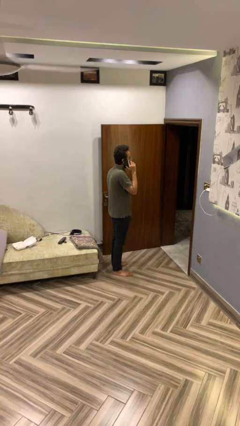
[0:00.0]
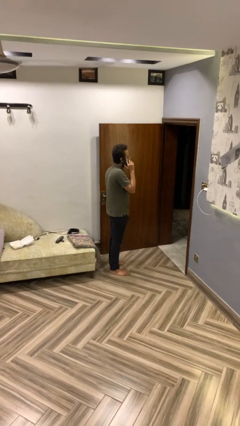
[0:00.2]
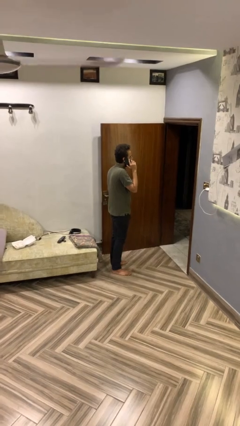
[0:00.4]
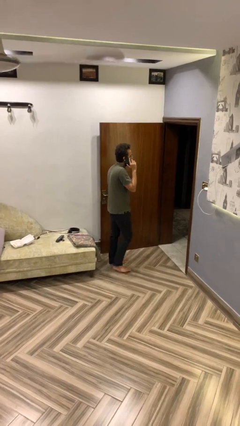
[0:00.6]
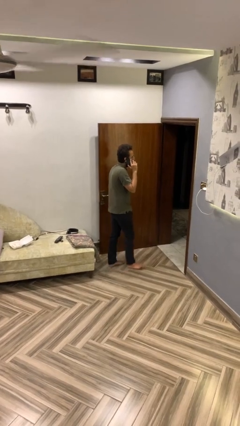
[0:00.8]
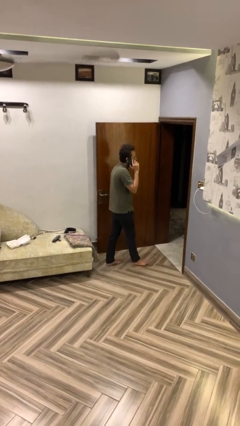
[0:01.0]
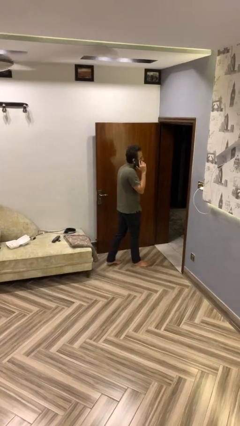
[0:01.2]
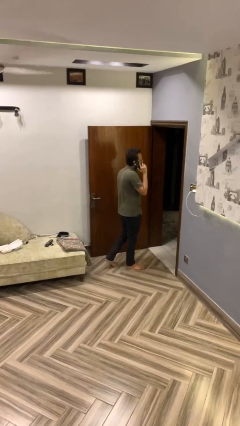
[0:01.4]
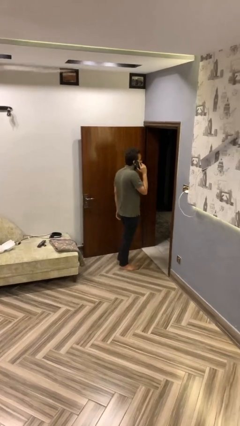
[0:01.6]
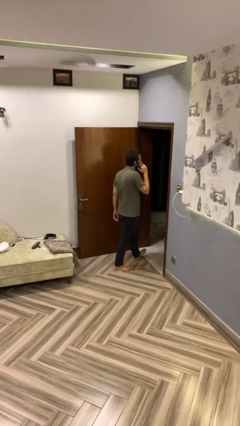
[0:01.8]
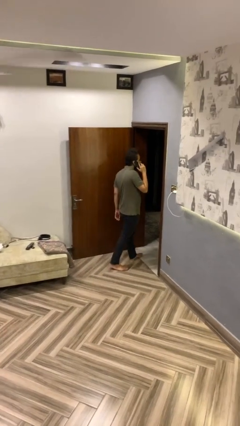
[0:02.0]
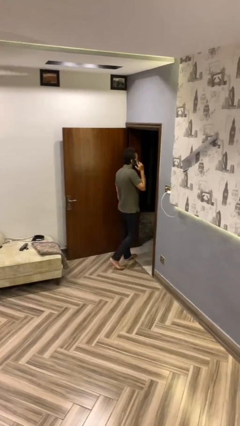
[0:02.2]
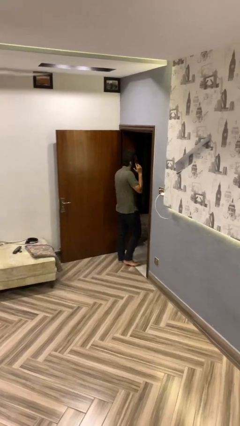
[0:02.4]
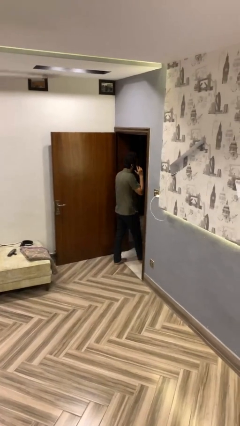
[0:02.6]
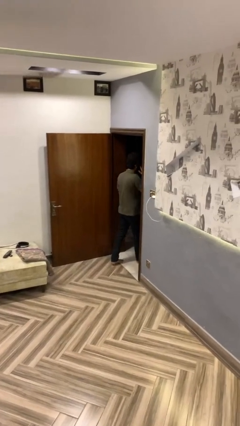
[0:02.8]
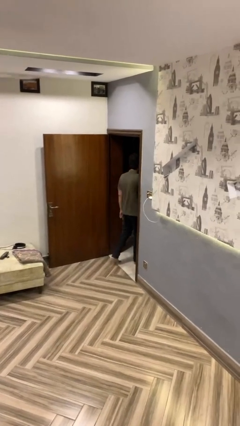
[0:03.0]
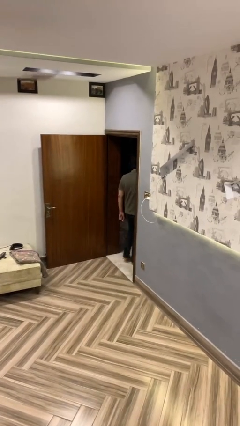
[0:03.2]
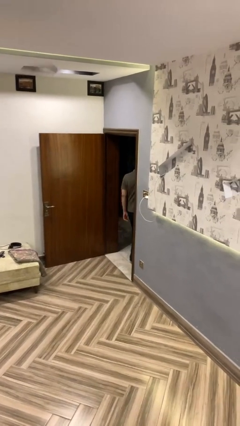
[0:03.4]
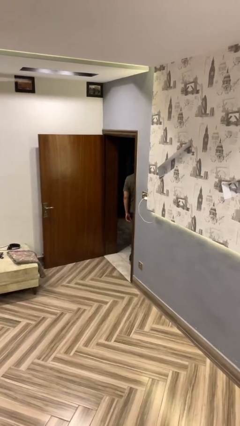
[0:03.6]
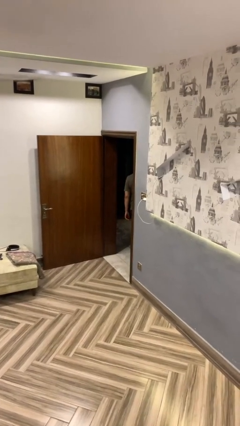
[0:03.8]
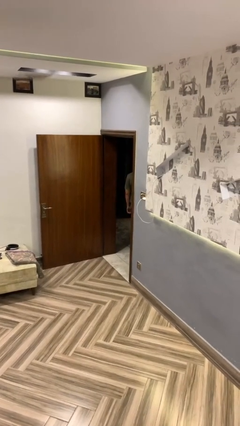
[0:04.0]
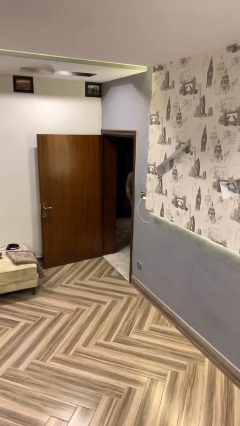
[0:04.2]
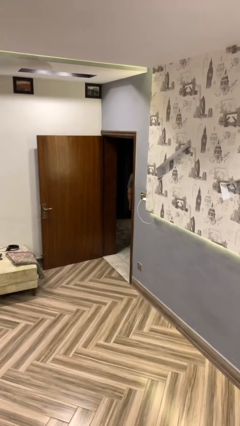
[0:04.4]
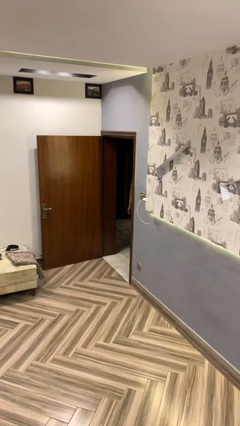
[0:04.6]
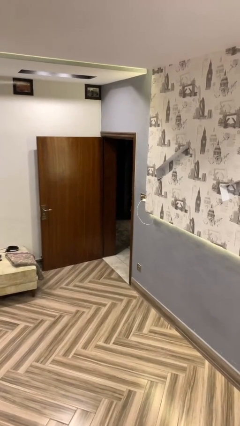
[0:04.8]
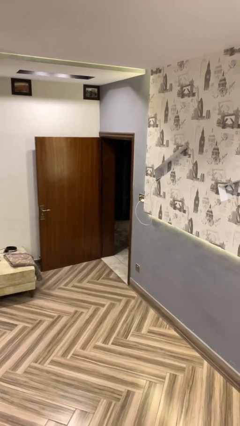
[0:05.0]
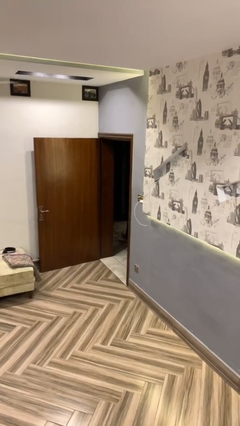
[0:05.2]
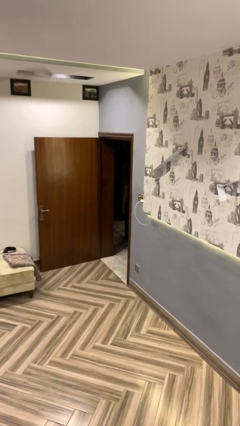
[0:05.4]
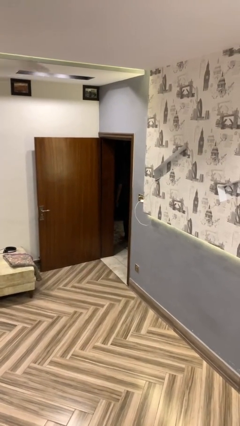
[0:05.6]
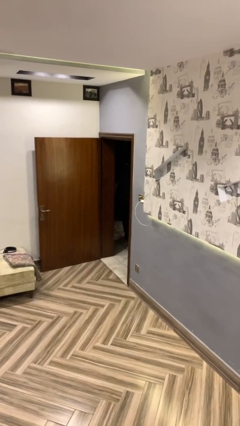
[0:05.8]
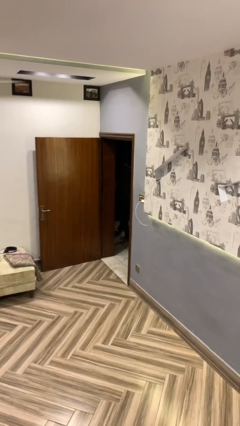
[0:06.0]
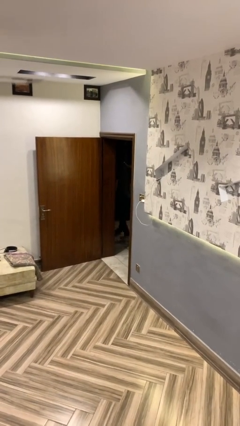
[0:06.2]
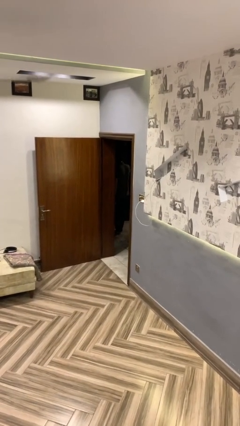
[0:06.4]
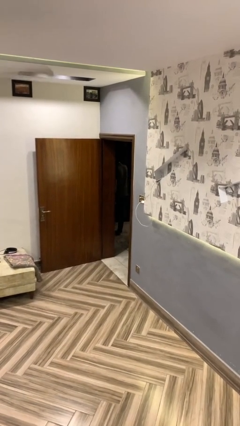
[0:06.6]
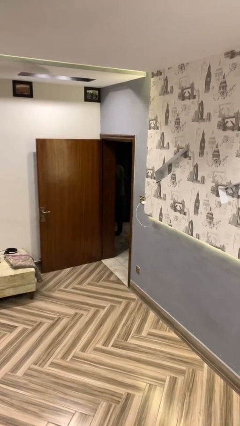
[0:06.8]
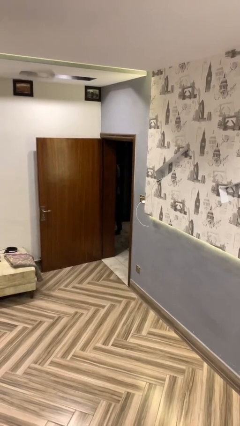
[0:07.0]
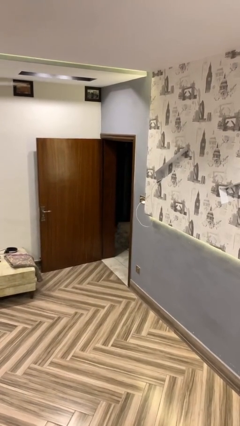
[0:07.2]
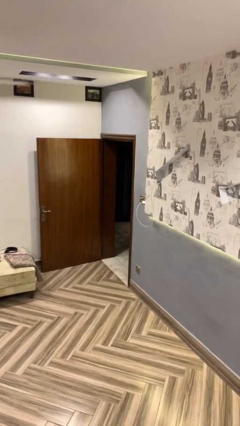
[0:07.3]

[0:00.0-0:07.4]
person exits scene through structure

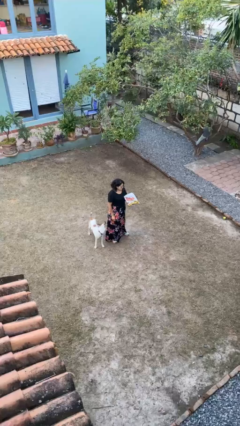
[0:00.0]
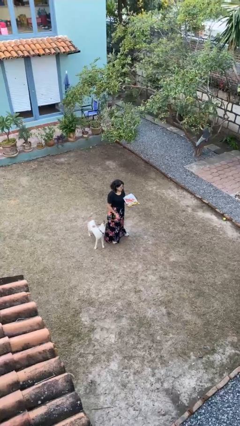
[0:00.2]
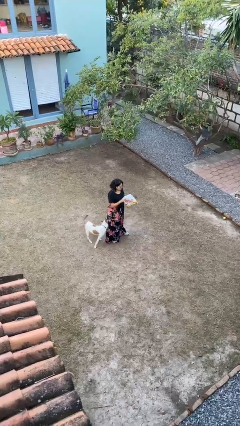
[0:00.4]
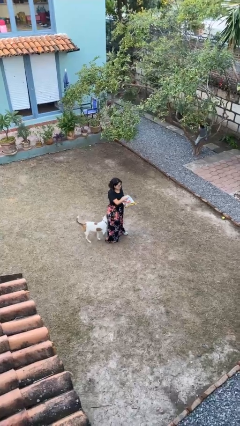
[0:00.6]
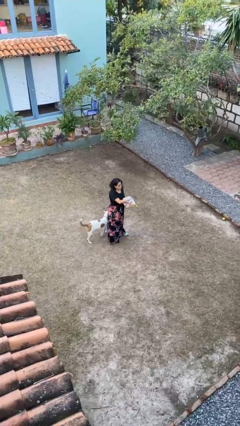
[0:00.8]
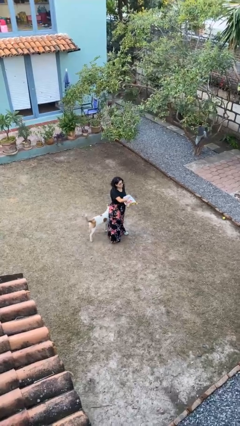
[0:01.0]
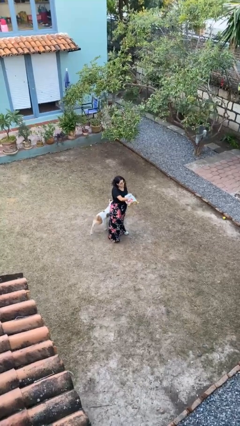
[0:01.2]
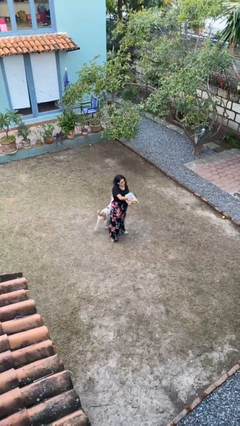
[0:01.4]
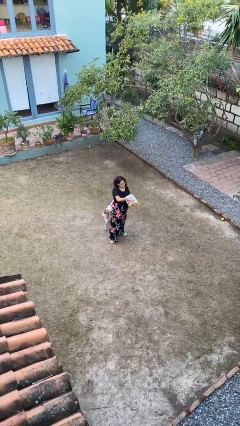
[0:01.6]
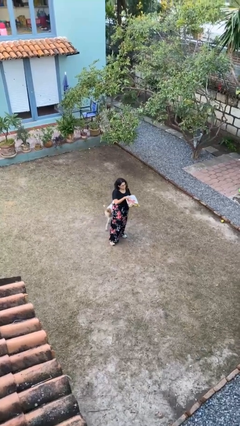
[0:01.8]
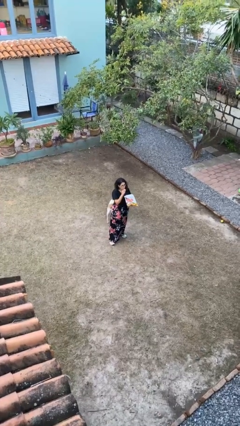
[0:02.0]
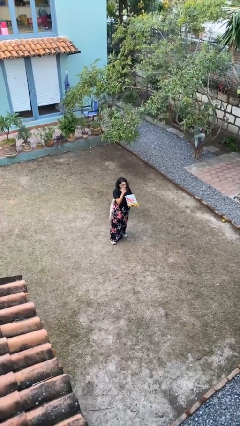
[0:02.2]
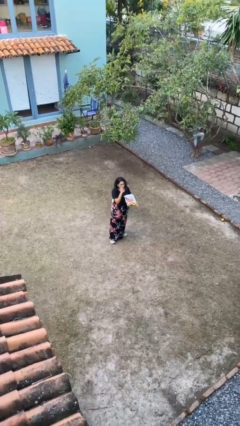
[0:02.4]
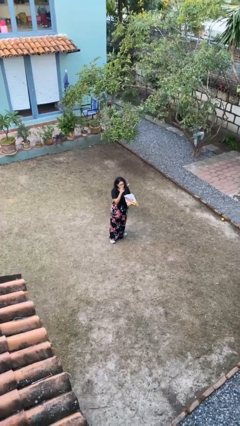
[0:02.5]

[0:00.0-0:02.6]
person eats snack from bag

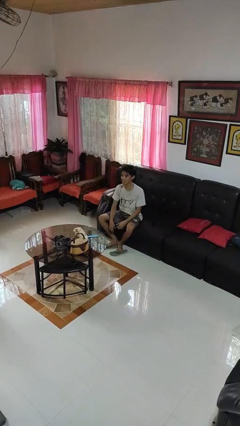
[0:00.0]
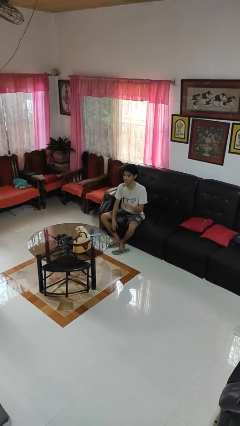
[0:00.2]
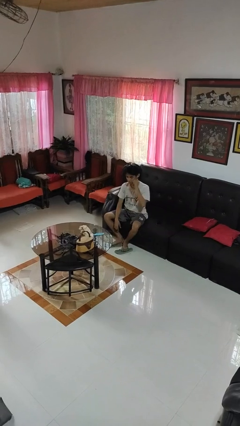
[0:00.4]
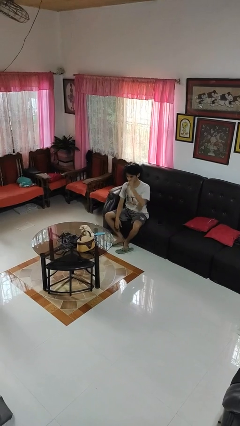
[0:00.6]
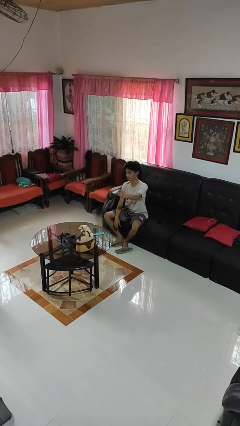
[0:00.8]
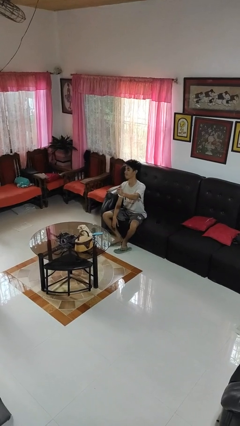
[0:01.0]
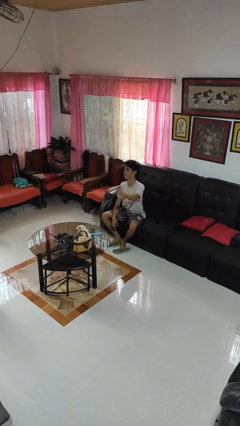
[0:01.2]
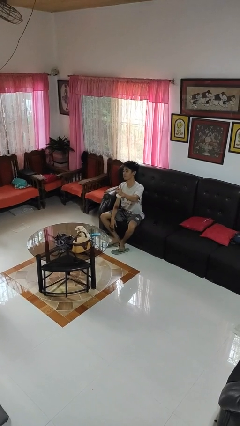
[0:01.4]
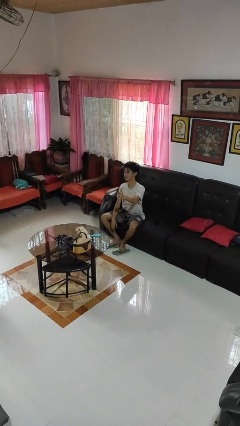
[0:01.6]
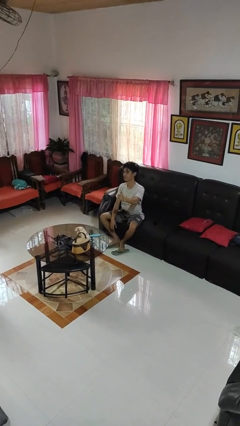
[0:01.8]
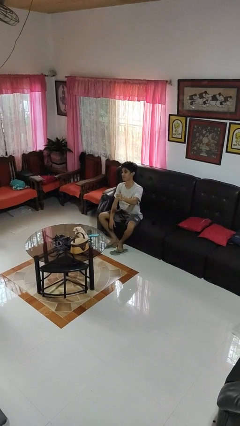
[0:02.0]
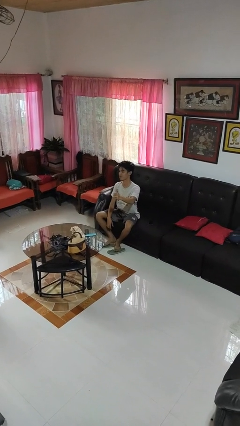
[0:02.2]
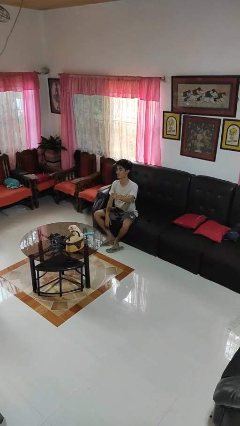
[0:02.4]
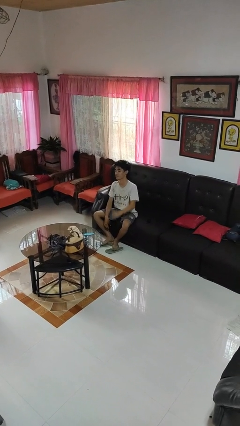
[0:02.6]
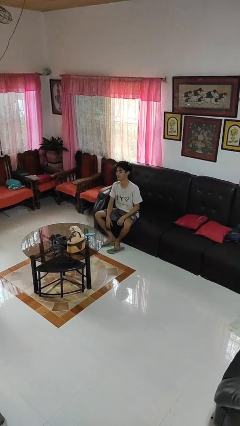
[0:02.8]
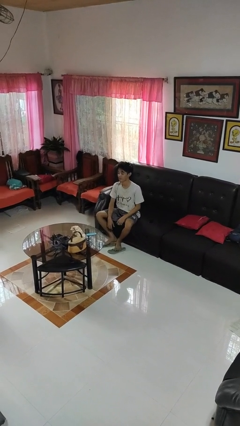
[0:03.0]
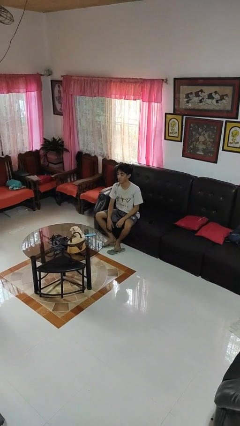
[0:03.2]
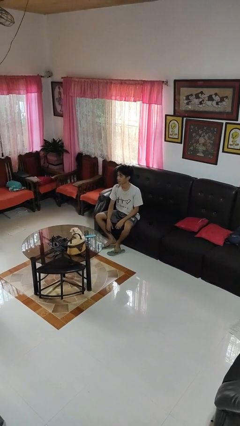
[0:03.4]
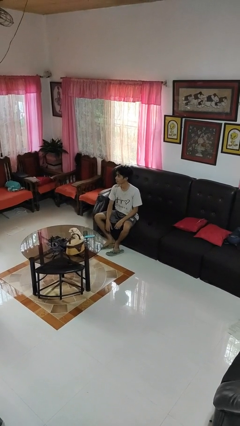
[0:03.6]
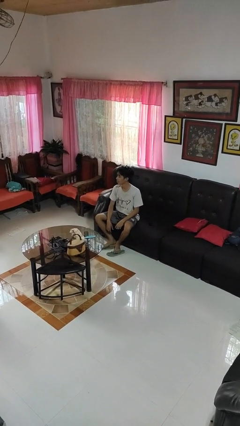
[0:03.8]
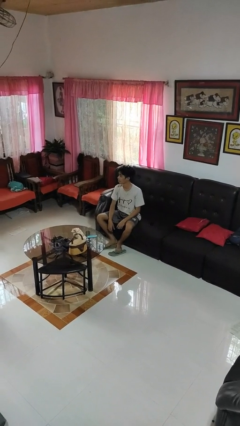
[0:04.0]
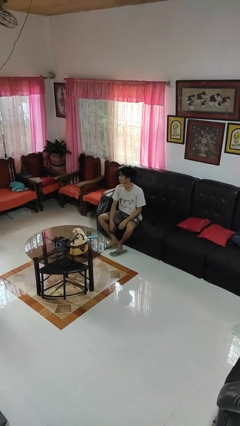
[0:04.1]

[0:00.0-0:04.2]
person gestures thumbs up

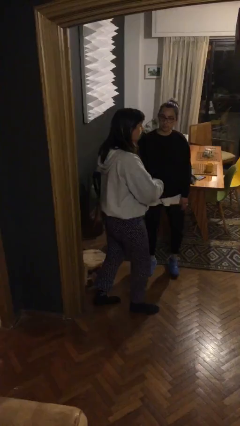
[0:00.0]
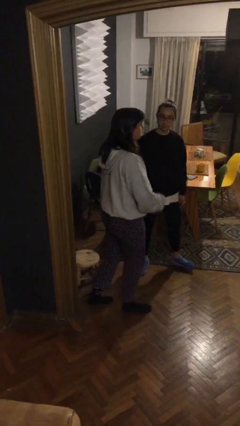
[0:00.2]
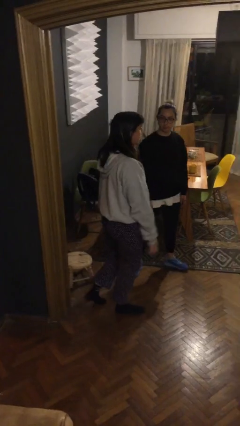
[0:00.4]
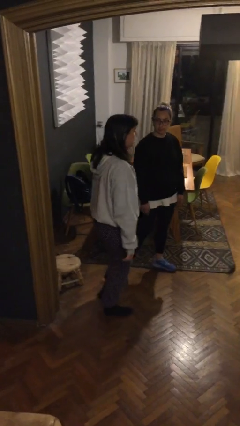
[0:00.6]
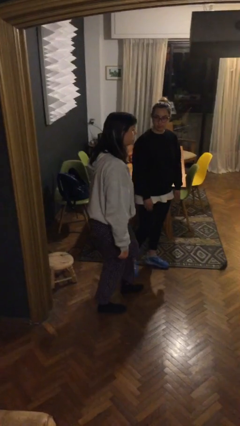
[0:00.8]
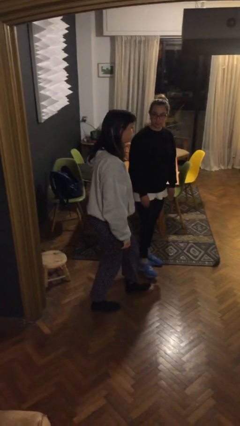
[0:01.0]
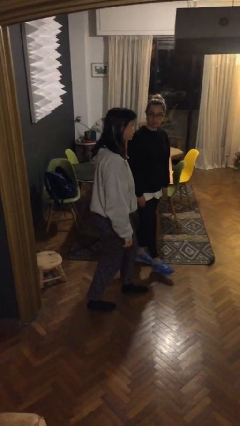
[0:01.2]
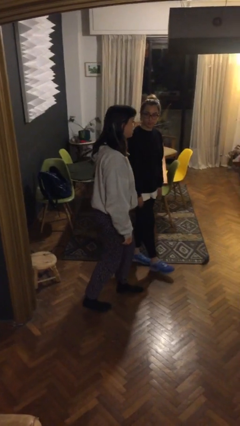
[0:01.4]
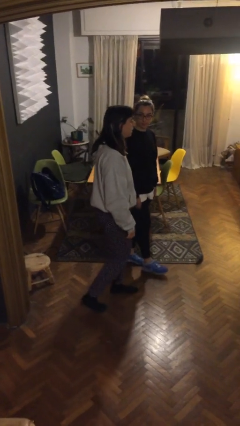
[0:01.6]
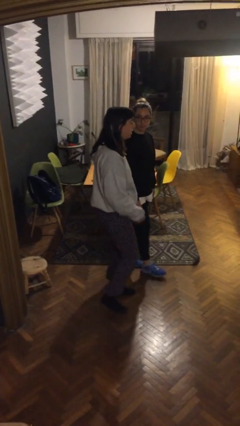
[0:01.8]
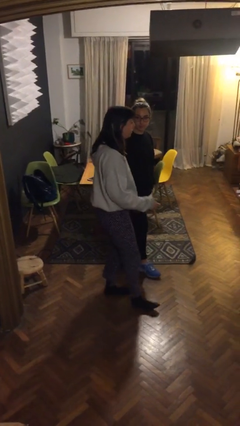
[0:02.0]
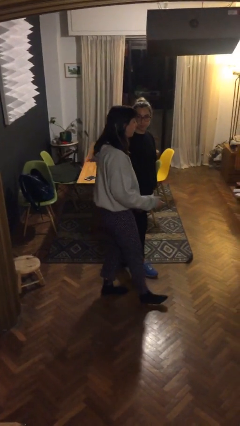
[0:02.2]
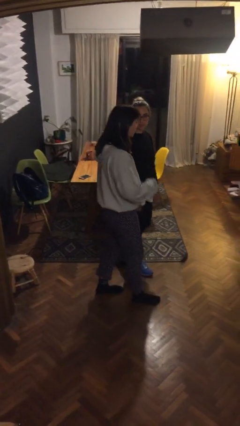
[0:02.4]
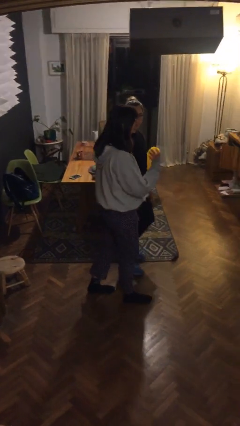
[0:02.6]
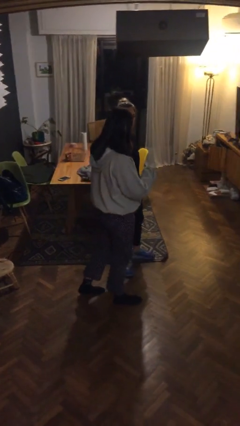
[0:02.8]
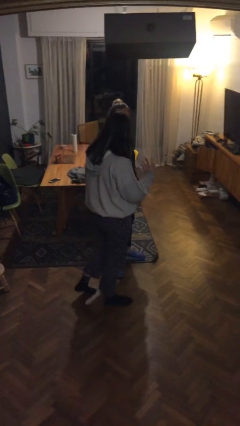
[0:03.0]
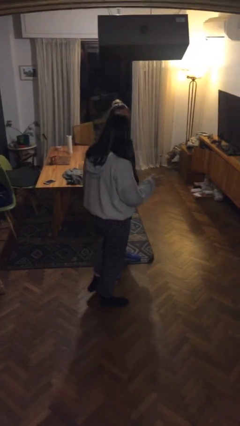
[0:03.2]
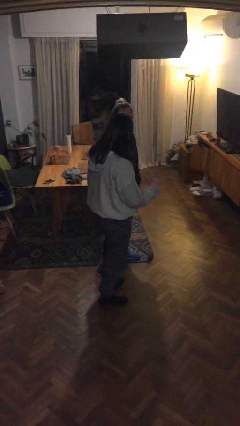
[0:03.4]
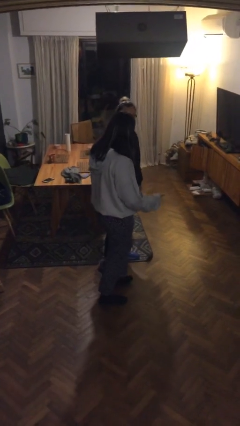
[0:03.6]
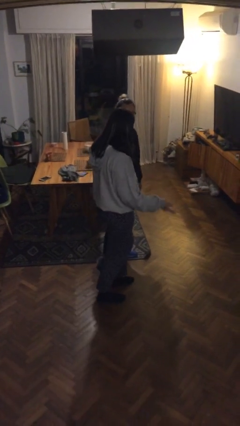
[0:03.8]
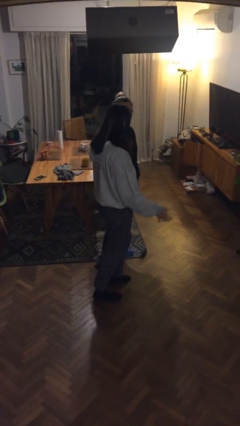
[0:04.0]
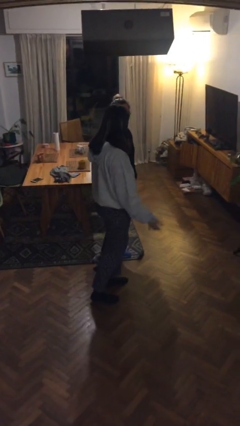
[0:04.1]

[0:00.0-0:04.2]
person talks to person
